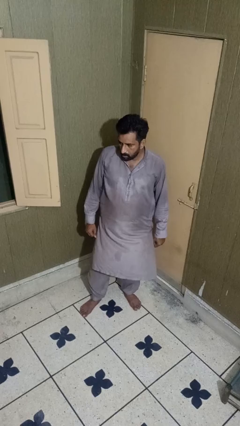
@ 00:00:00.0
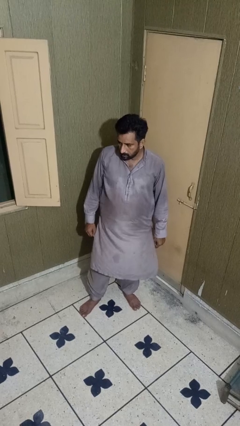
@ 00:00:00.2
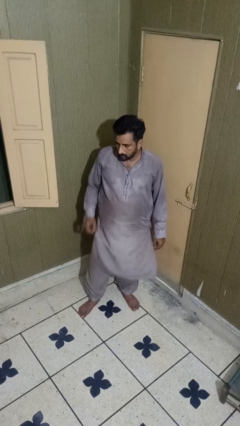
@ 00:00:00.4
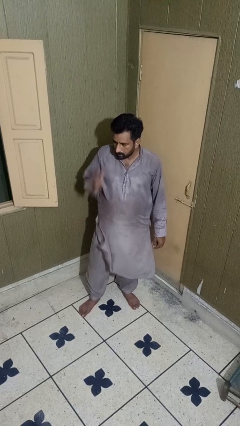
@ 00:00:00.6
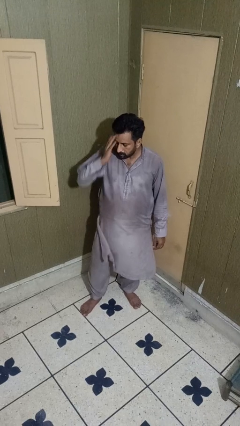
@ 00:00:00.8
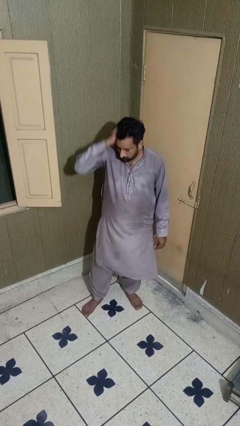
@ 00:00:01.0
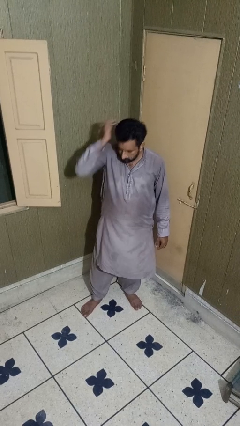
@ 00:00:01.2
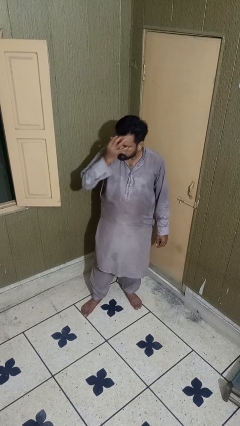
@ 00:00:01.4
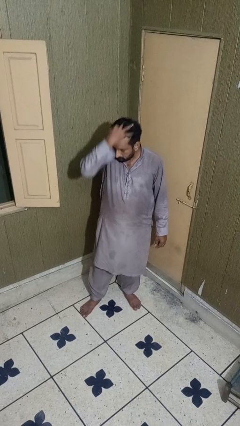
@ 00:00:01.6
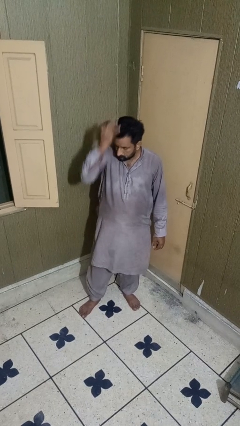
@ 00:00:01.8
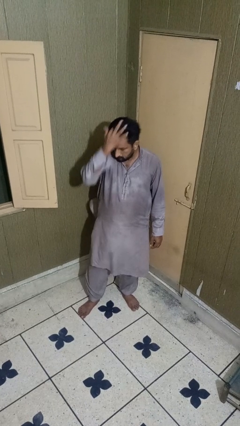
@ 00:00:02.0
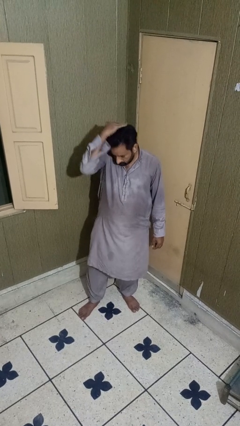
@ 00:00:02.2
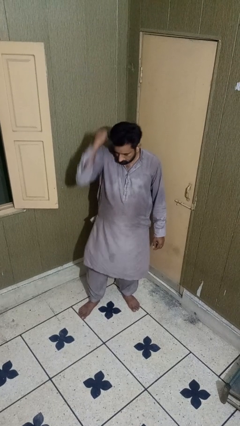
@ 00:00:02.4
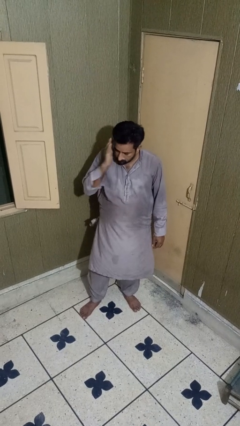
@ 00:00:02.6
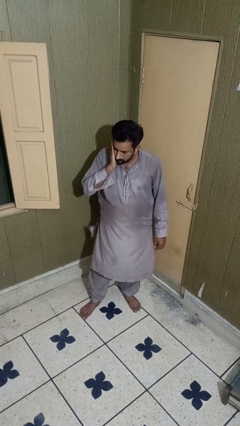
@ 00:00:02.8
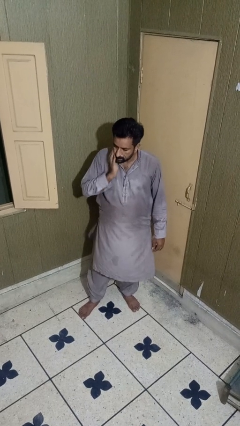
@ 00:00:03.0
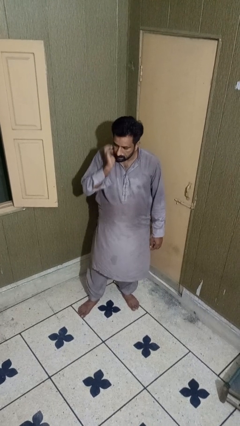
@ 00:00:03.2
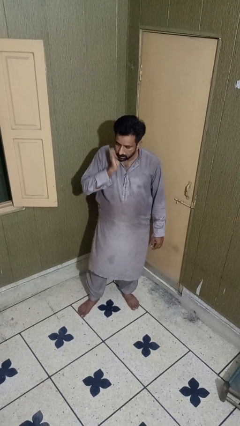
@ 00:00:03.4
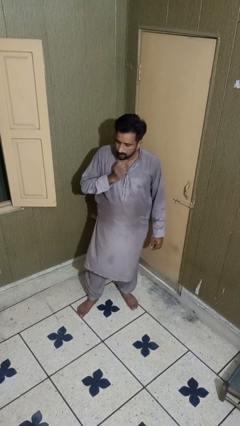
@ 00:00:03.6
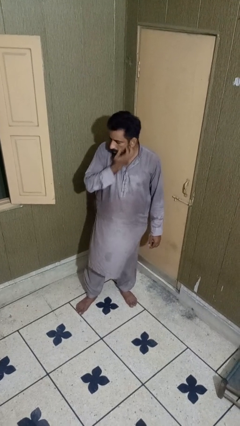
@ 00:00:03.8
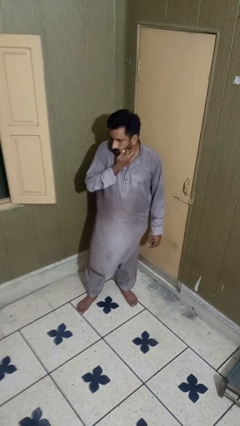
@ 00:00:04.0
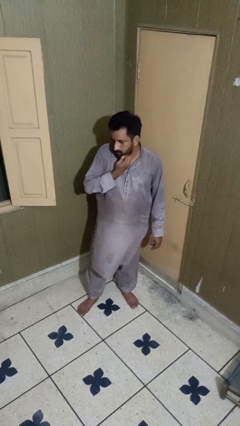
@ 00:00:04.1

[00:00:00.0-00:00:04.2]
person scratches face

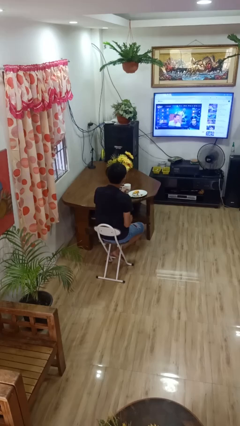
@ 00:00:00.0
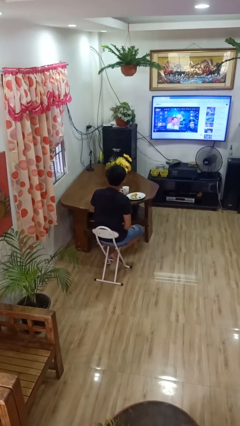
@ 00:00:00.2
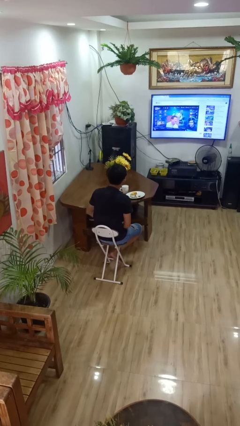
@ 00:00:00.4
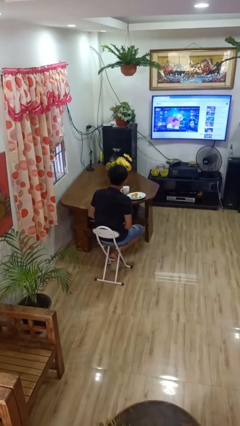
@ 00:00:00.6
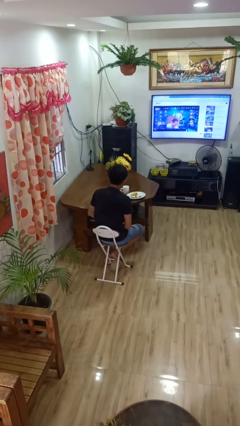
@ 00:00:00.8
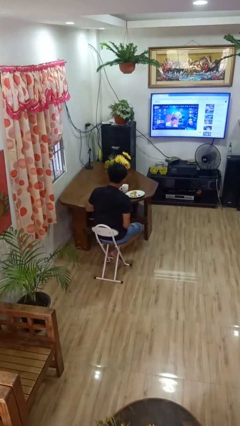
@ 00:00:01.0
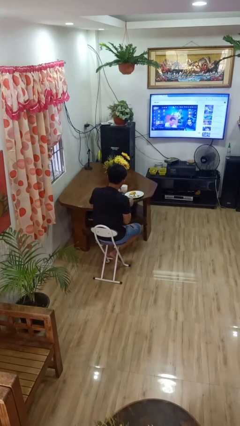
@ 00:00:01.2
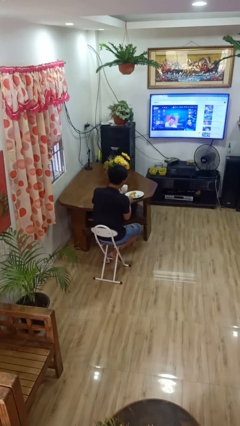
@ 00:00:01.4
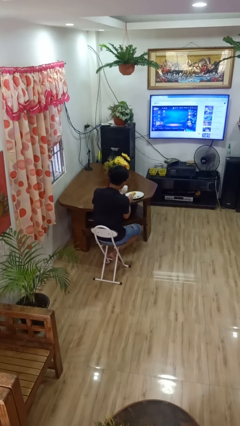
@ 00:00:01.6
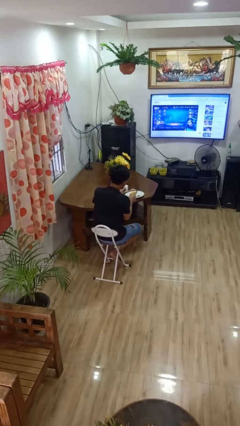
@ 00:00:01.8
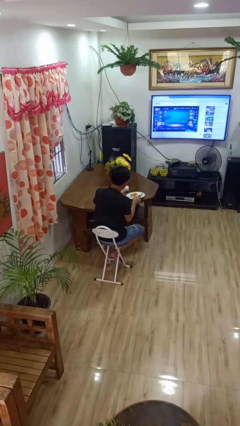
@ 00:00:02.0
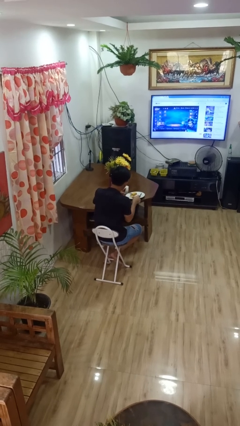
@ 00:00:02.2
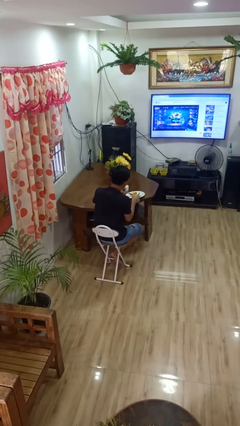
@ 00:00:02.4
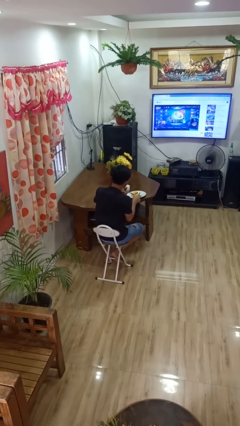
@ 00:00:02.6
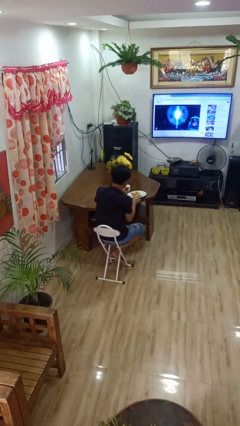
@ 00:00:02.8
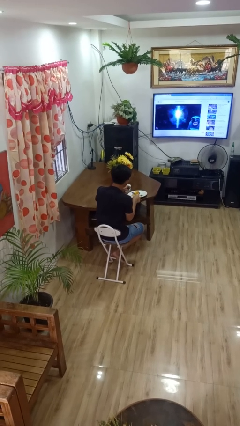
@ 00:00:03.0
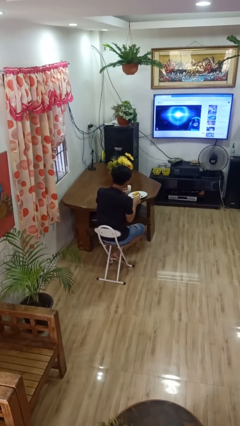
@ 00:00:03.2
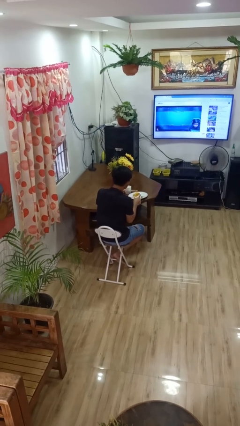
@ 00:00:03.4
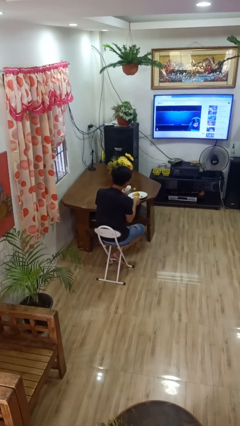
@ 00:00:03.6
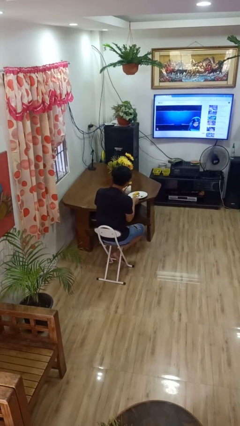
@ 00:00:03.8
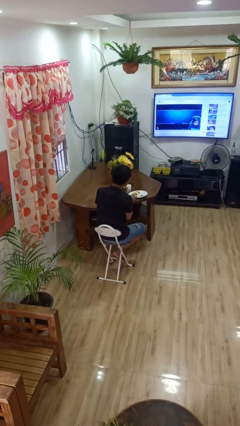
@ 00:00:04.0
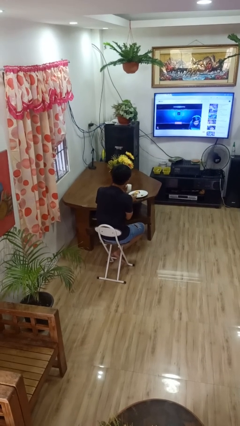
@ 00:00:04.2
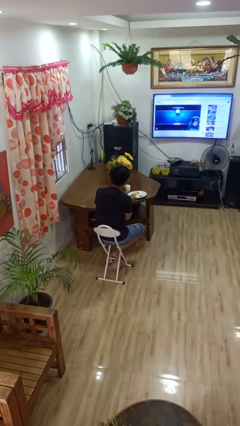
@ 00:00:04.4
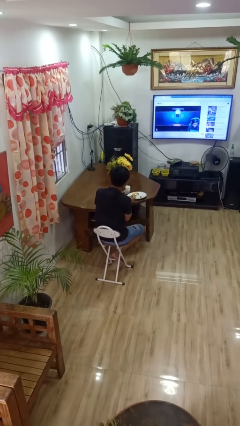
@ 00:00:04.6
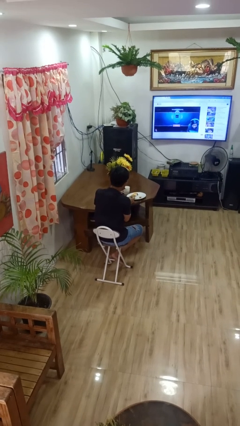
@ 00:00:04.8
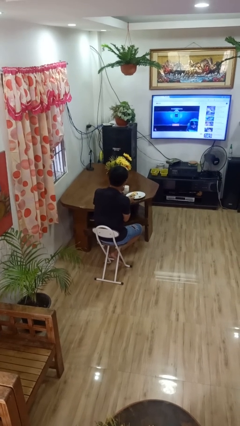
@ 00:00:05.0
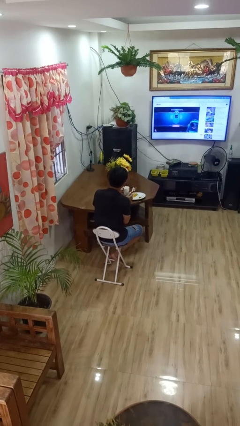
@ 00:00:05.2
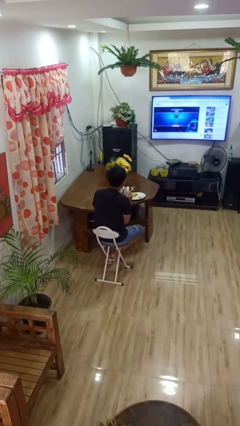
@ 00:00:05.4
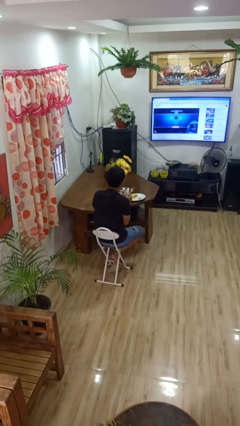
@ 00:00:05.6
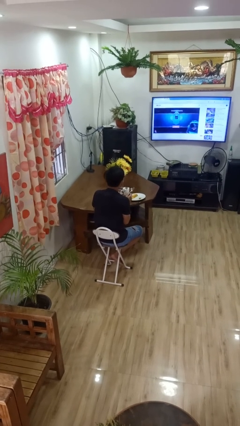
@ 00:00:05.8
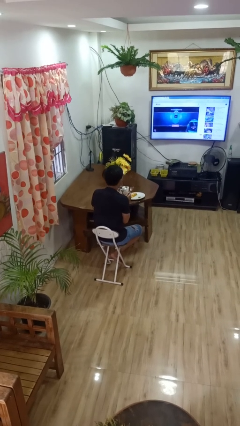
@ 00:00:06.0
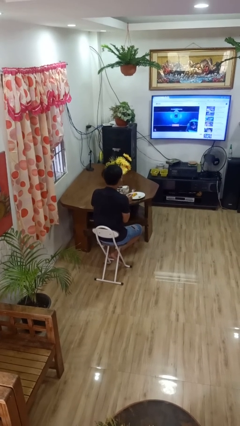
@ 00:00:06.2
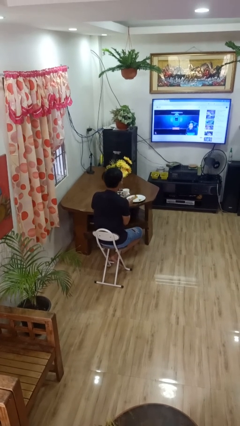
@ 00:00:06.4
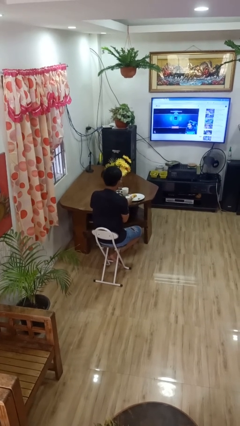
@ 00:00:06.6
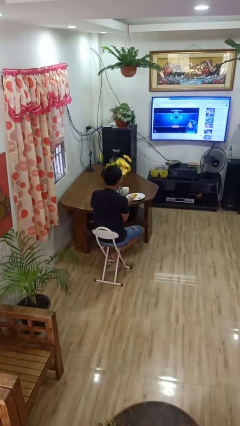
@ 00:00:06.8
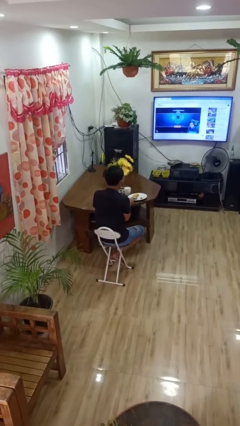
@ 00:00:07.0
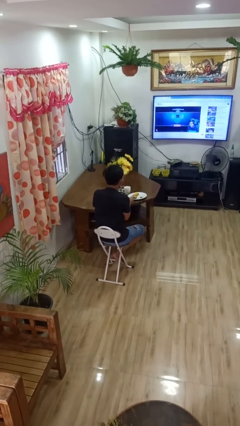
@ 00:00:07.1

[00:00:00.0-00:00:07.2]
person eats with utensil

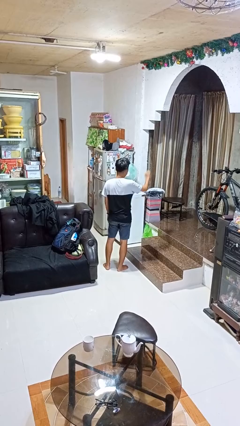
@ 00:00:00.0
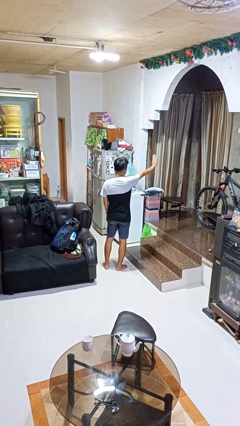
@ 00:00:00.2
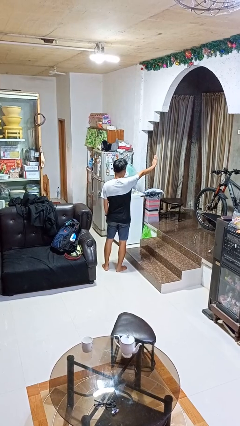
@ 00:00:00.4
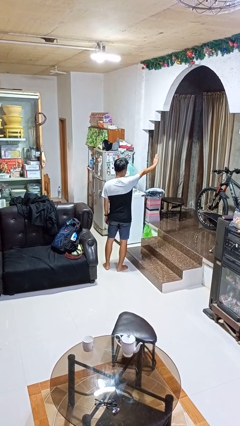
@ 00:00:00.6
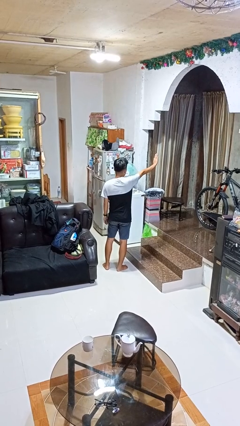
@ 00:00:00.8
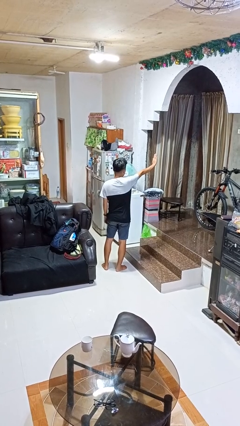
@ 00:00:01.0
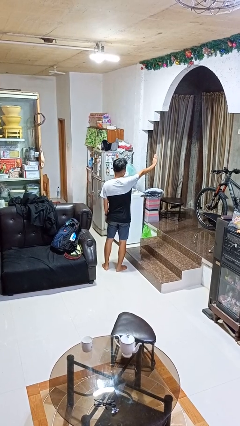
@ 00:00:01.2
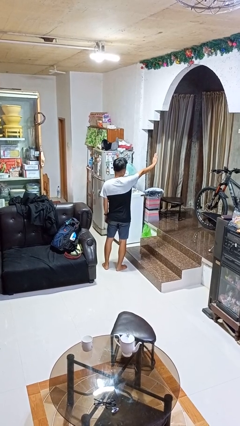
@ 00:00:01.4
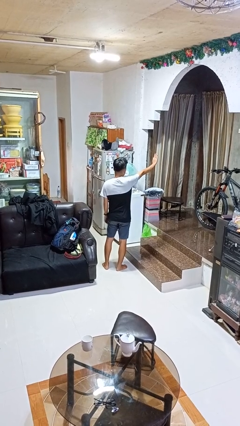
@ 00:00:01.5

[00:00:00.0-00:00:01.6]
person gestures stop

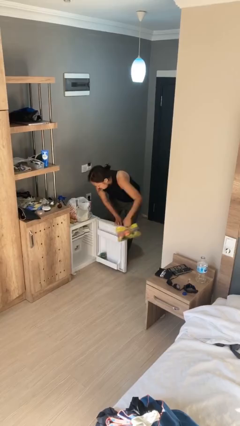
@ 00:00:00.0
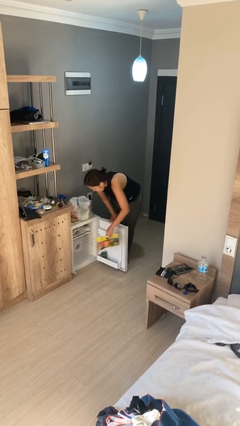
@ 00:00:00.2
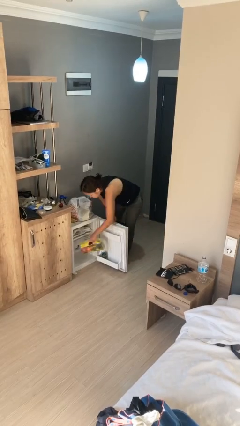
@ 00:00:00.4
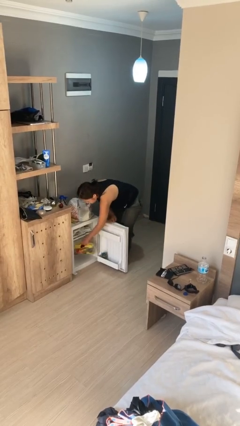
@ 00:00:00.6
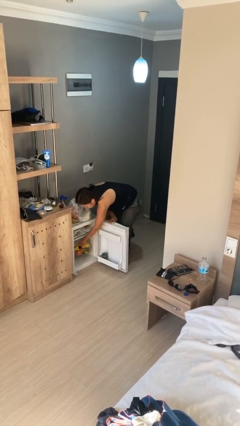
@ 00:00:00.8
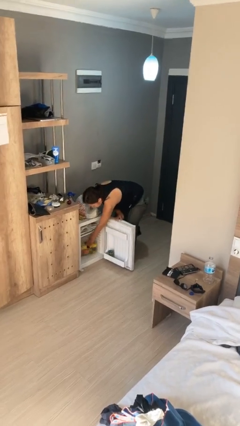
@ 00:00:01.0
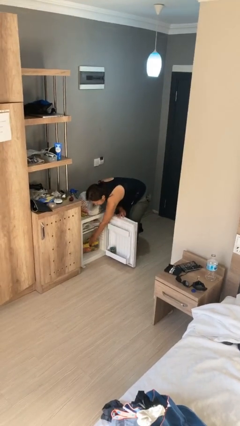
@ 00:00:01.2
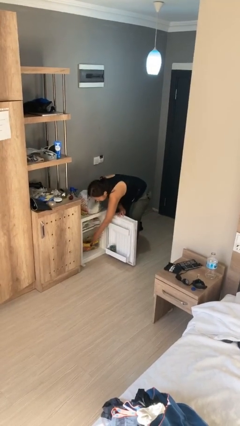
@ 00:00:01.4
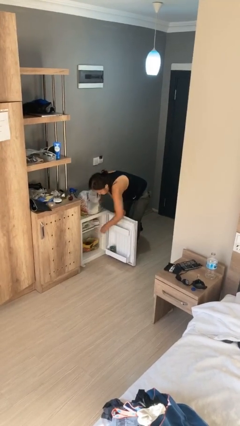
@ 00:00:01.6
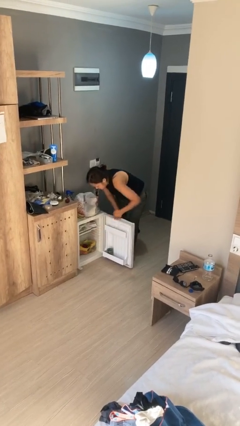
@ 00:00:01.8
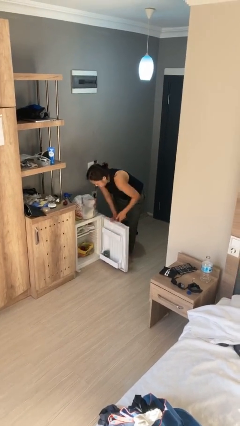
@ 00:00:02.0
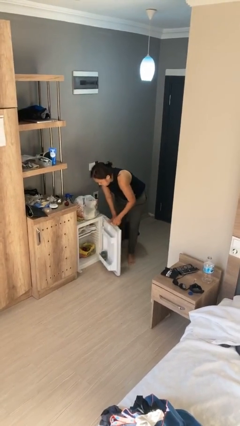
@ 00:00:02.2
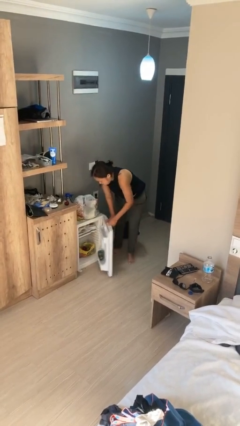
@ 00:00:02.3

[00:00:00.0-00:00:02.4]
person puts object into refrigerator

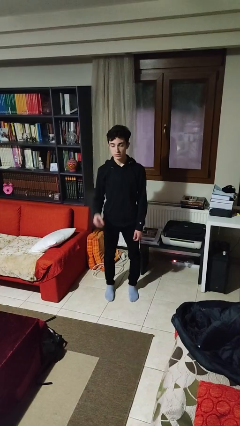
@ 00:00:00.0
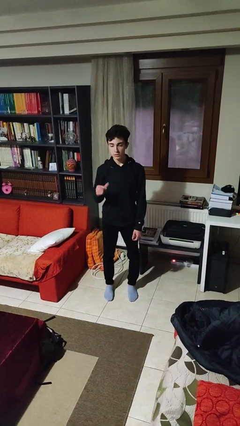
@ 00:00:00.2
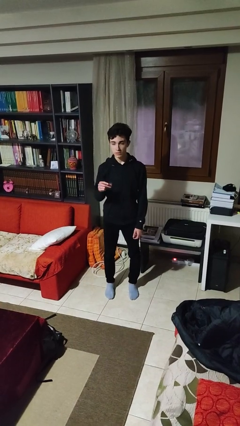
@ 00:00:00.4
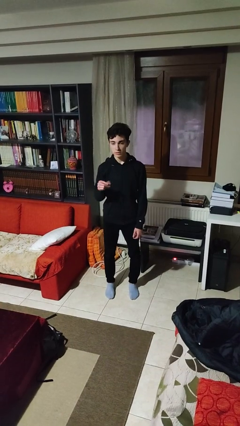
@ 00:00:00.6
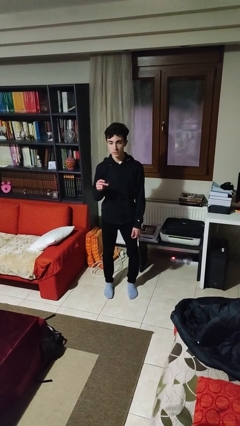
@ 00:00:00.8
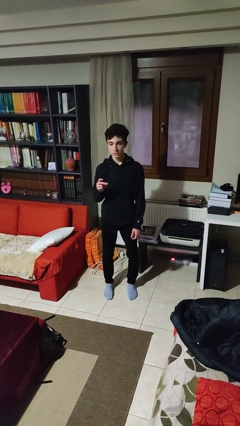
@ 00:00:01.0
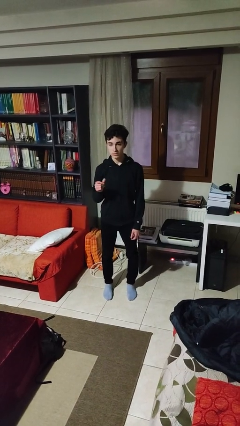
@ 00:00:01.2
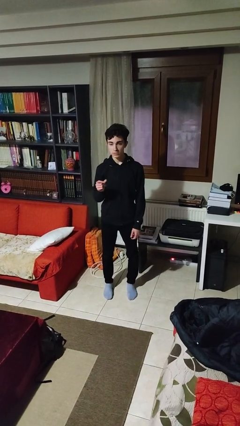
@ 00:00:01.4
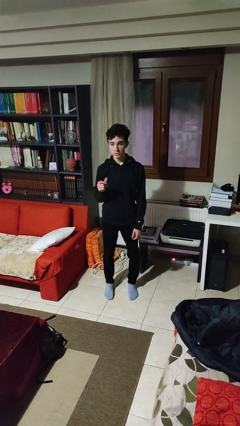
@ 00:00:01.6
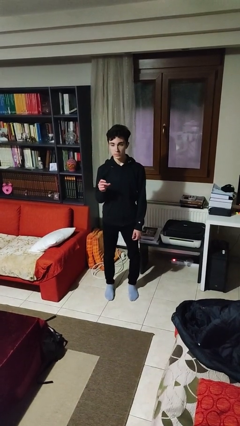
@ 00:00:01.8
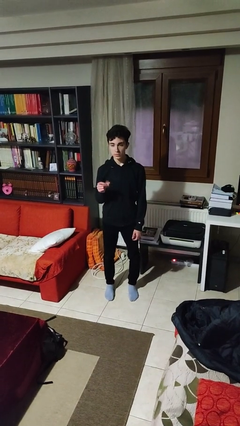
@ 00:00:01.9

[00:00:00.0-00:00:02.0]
person snaps fingers

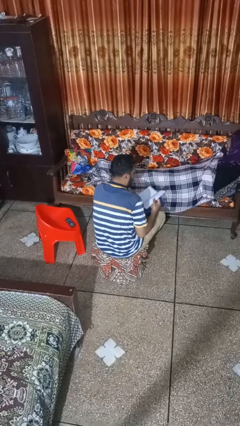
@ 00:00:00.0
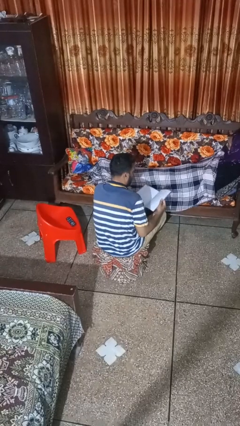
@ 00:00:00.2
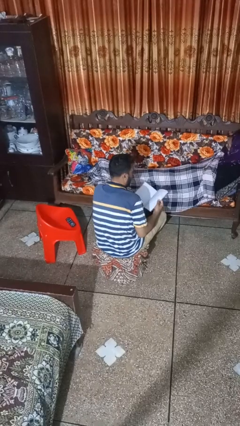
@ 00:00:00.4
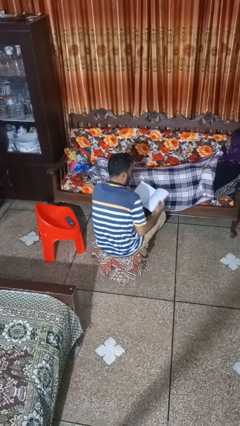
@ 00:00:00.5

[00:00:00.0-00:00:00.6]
person covers friend with blanket
